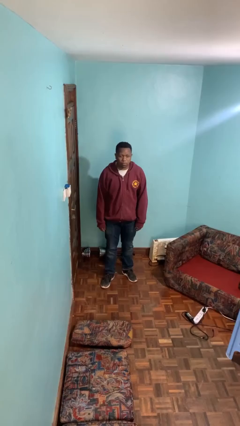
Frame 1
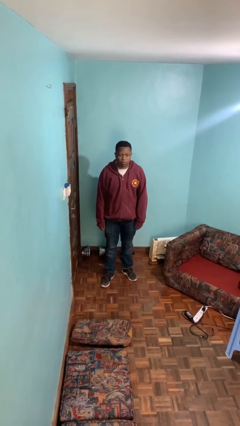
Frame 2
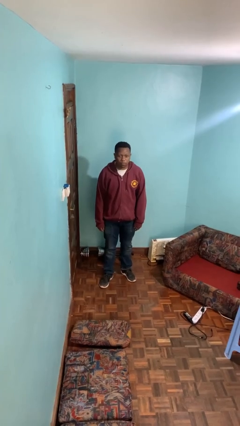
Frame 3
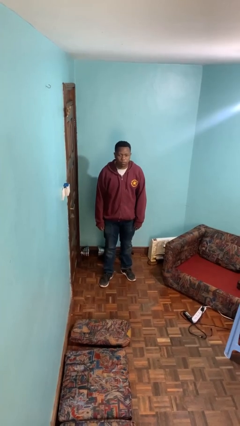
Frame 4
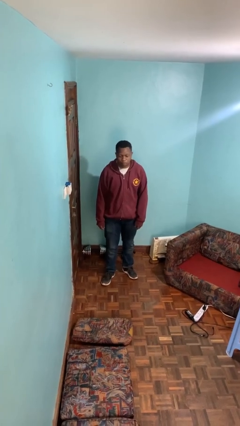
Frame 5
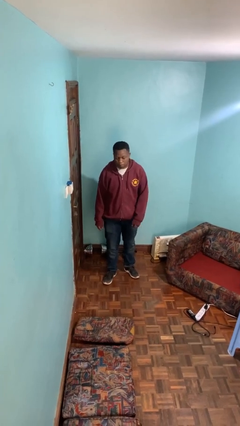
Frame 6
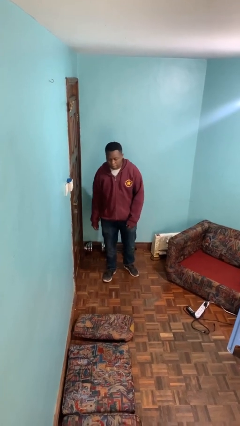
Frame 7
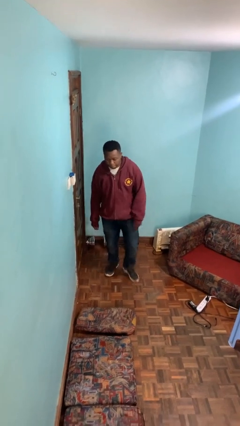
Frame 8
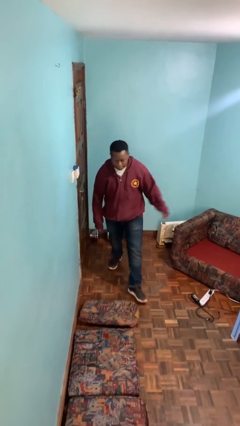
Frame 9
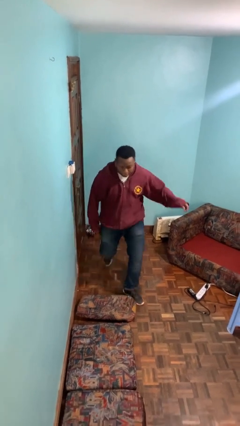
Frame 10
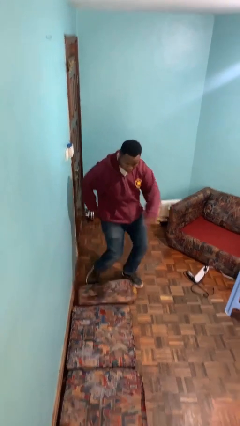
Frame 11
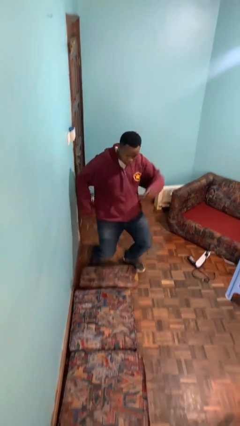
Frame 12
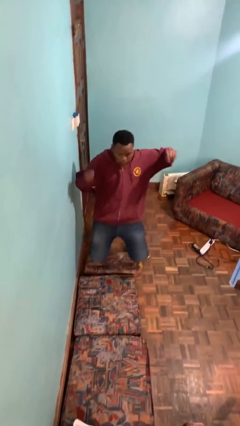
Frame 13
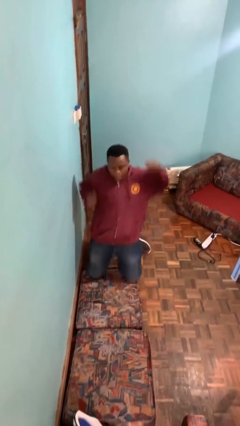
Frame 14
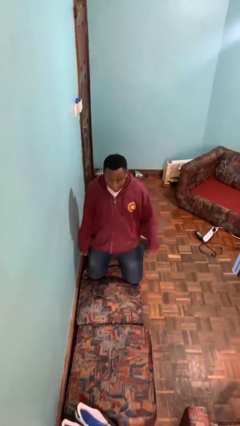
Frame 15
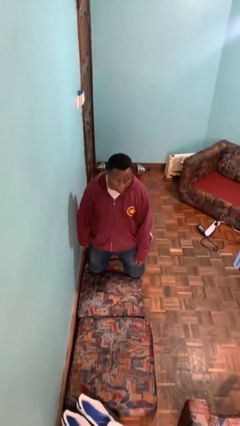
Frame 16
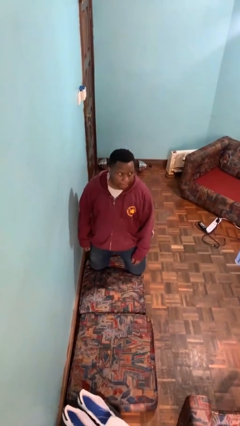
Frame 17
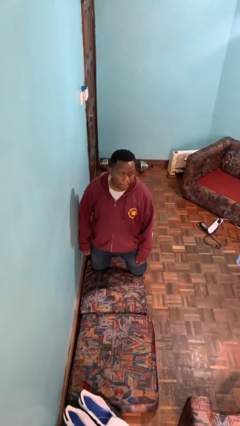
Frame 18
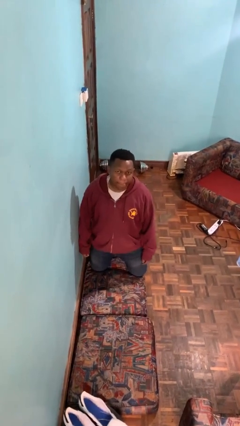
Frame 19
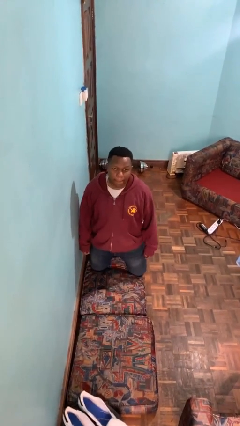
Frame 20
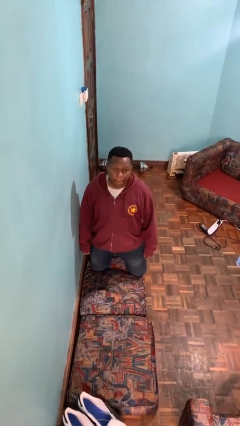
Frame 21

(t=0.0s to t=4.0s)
person trips on object on floor

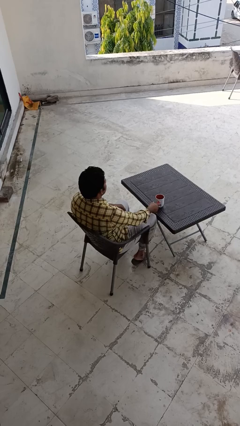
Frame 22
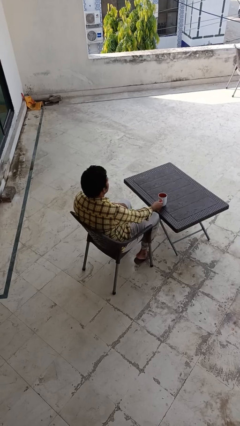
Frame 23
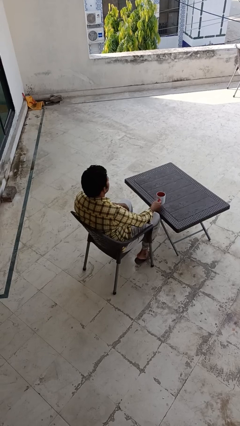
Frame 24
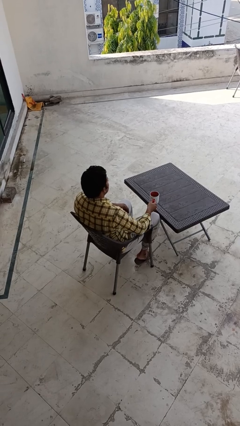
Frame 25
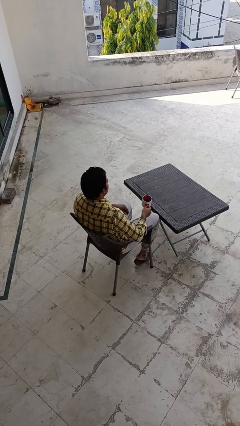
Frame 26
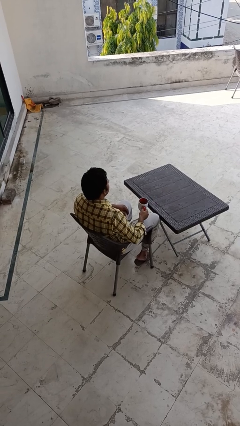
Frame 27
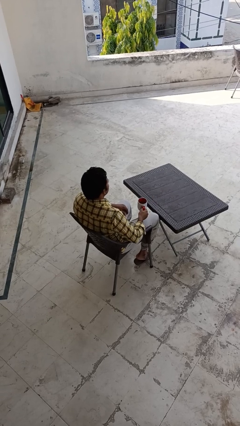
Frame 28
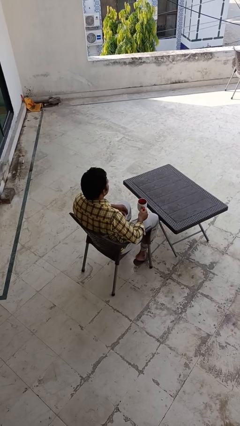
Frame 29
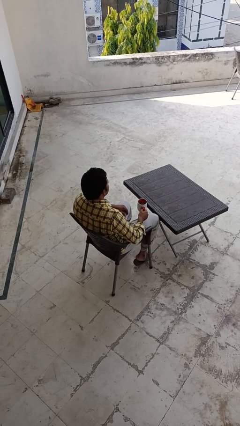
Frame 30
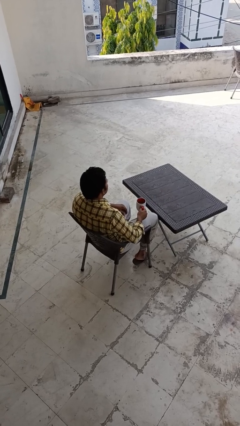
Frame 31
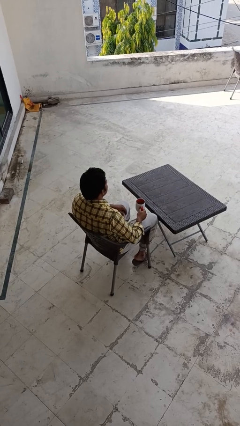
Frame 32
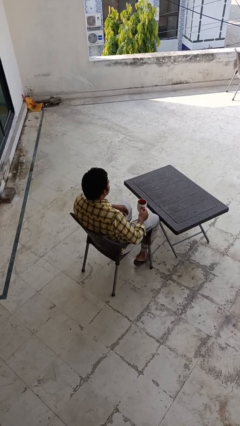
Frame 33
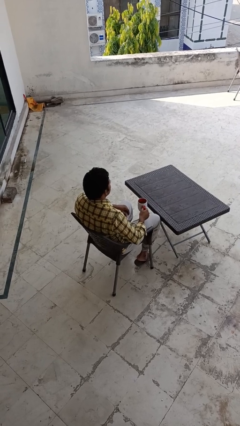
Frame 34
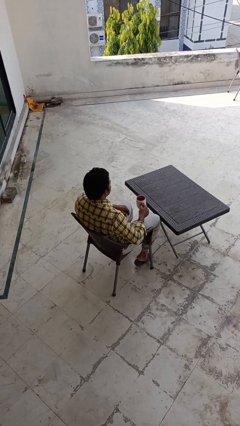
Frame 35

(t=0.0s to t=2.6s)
person picks up object from table

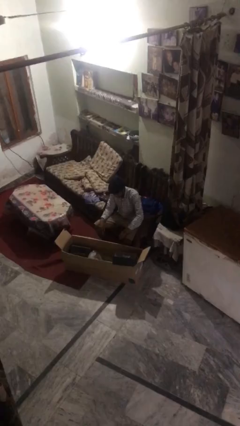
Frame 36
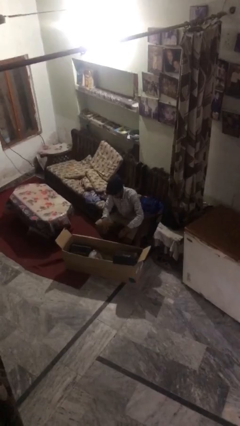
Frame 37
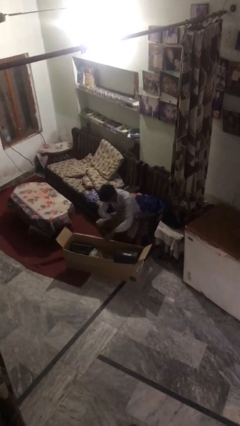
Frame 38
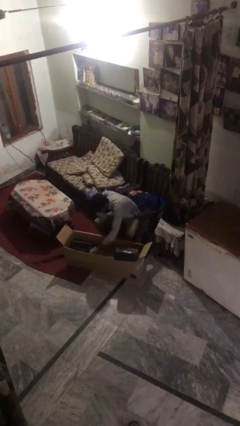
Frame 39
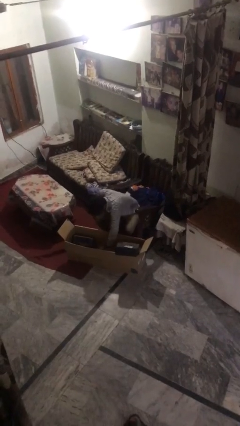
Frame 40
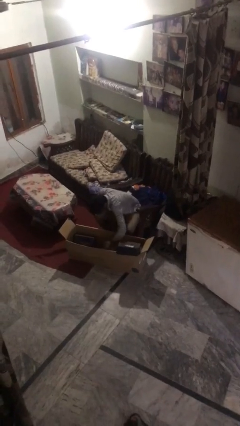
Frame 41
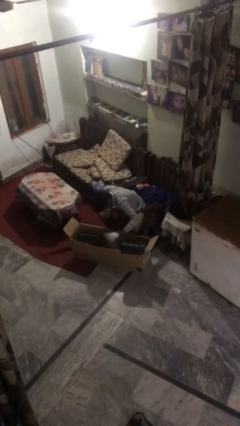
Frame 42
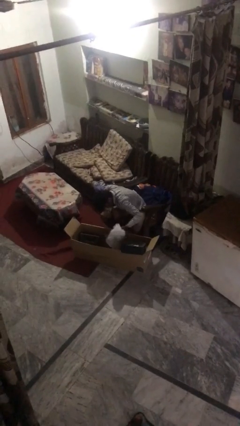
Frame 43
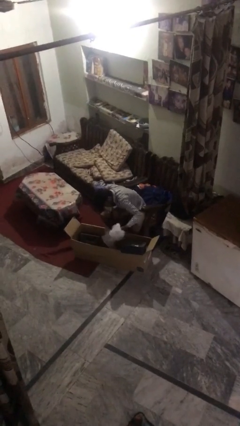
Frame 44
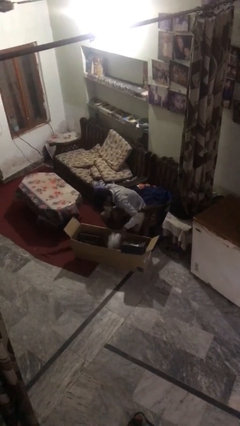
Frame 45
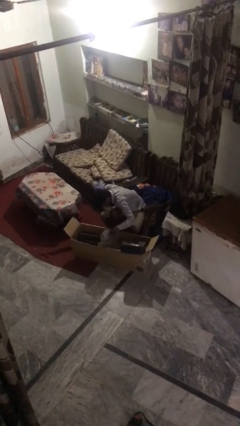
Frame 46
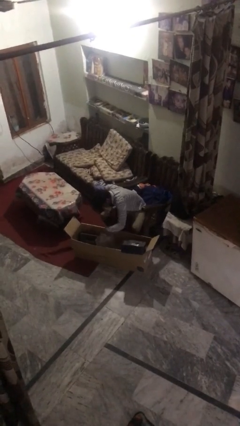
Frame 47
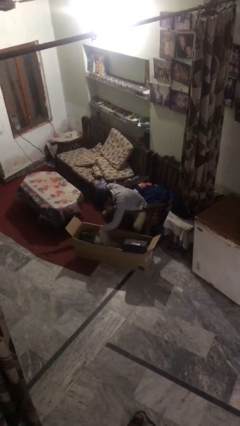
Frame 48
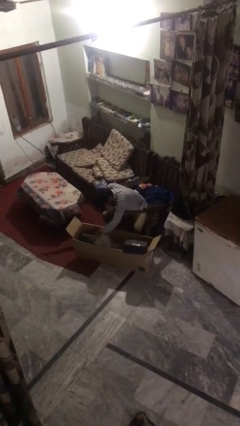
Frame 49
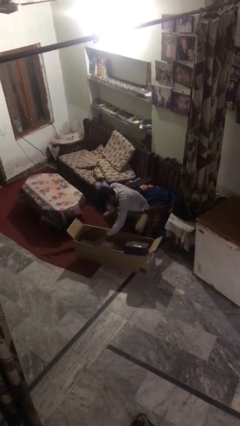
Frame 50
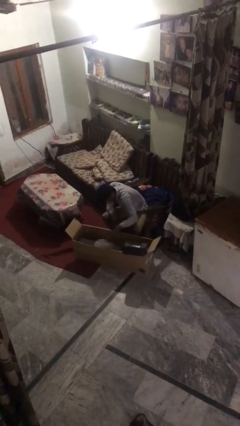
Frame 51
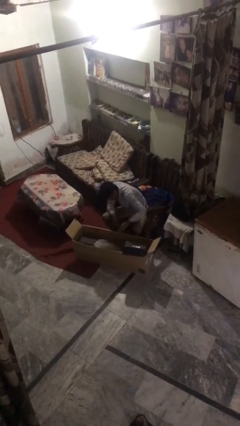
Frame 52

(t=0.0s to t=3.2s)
person searches in box

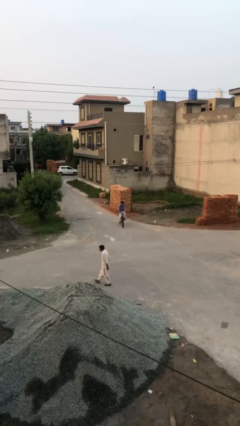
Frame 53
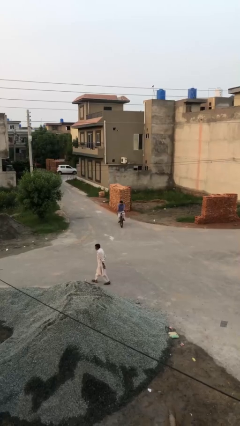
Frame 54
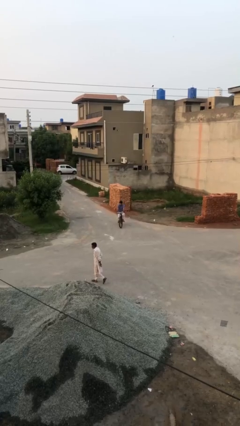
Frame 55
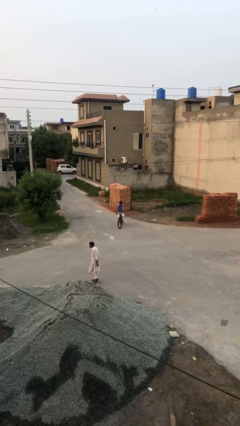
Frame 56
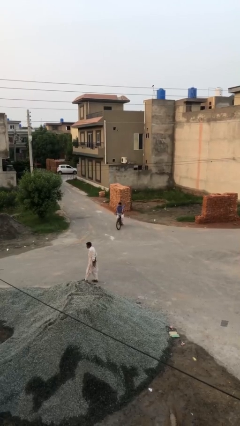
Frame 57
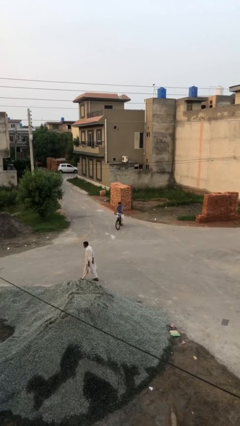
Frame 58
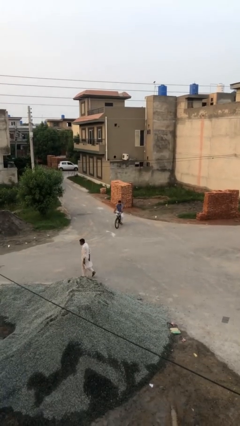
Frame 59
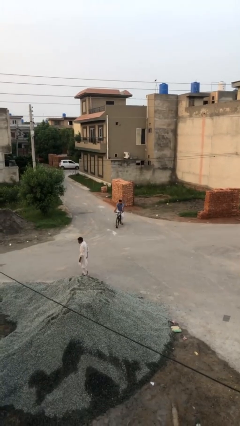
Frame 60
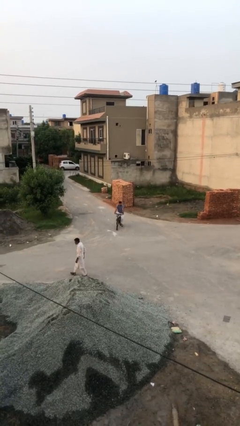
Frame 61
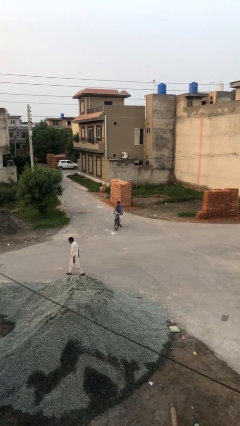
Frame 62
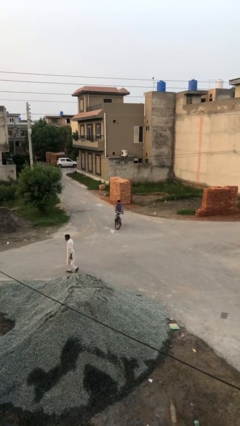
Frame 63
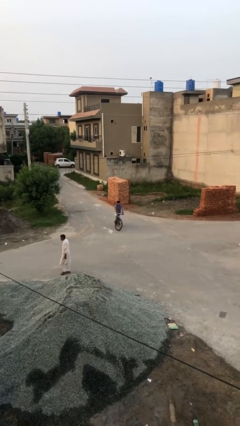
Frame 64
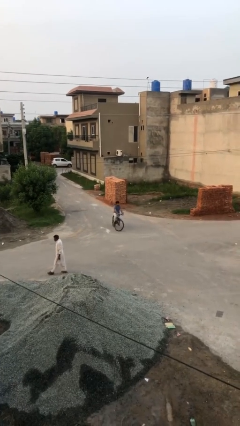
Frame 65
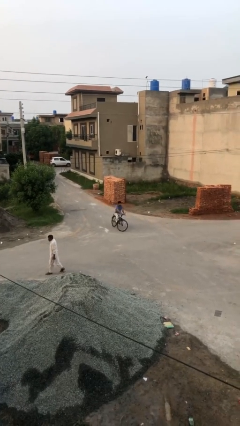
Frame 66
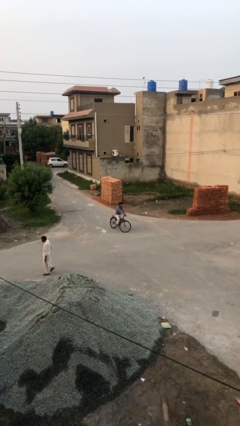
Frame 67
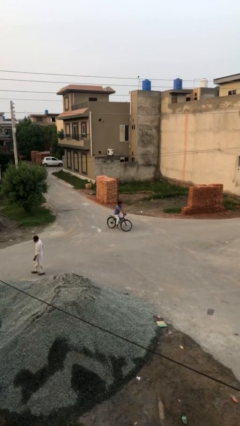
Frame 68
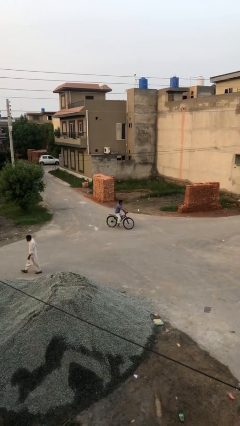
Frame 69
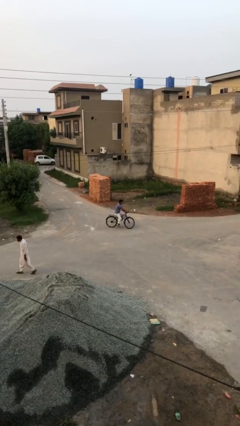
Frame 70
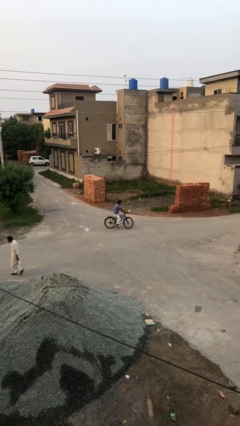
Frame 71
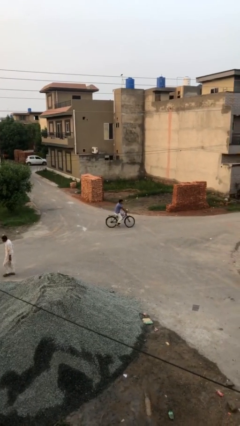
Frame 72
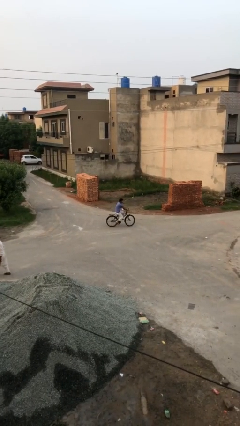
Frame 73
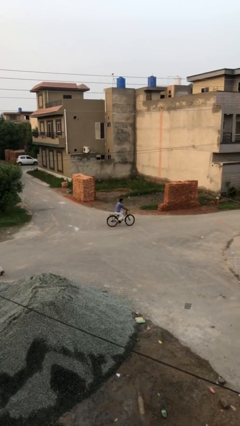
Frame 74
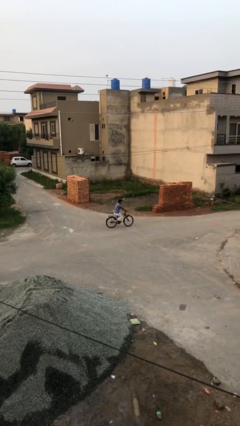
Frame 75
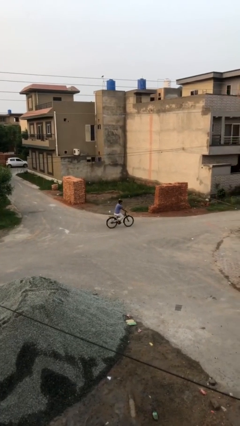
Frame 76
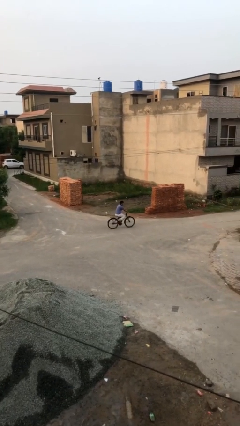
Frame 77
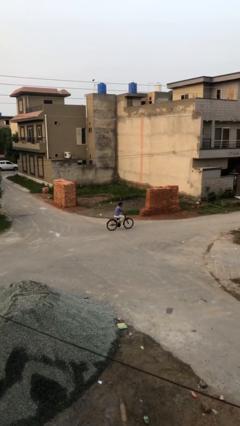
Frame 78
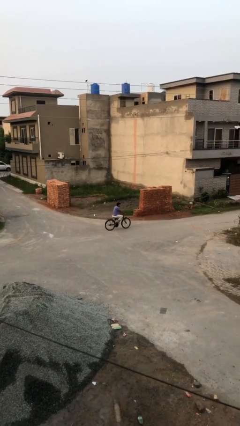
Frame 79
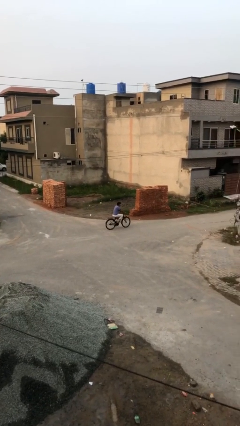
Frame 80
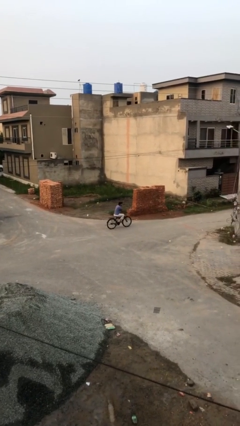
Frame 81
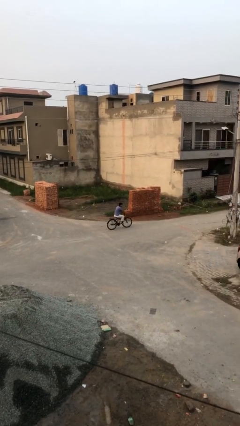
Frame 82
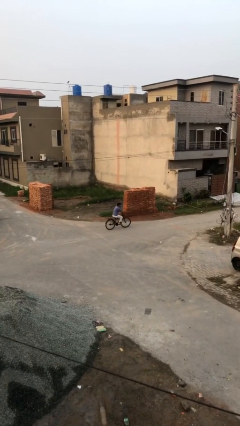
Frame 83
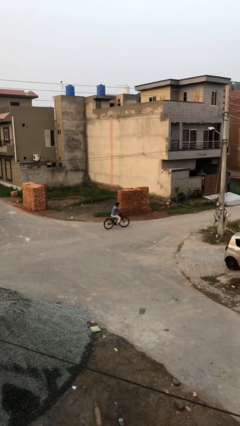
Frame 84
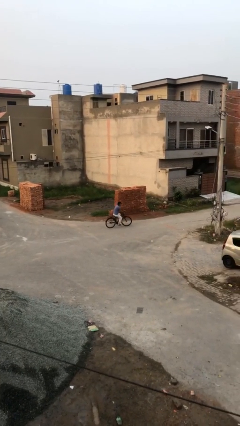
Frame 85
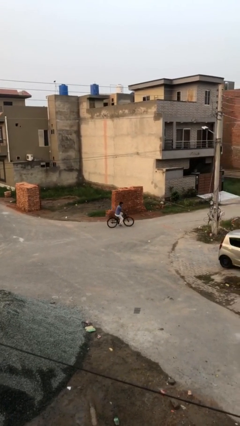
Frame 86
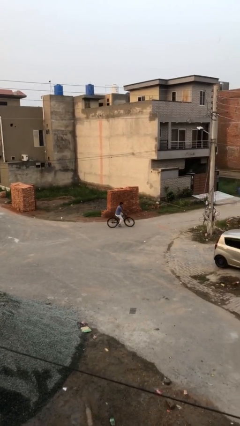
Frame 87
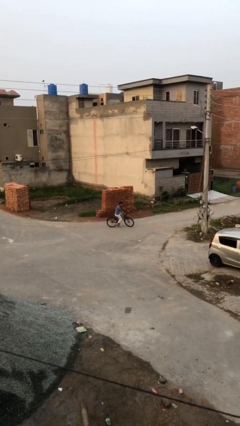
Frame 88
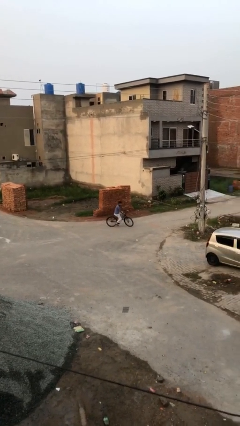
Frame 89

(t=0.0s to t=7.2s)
person rides bicycle
